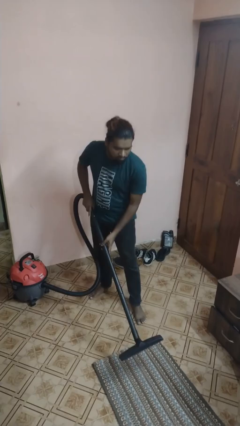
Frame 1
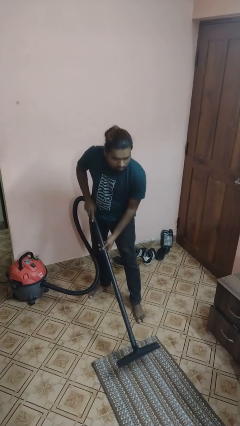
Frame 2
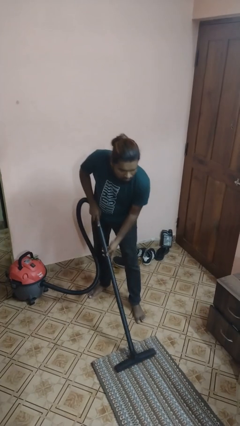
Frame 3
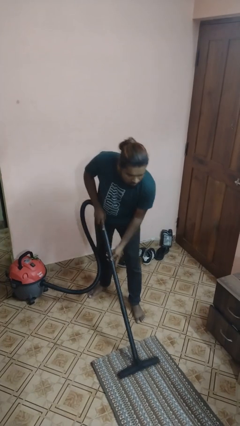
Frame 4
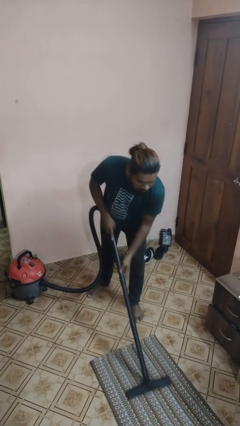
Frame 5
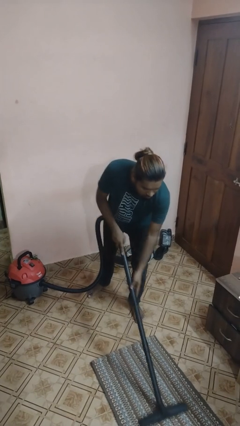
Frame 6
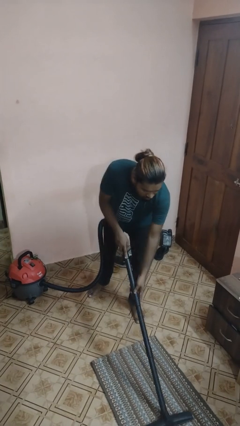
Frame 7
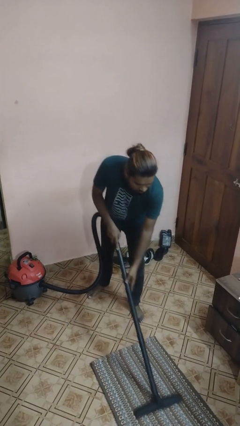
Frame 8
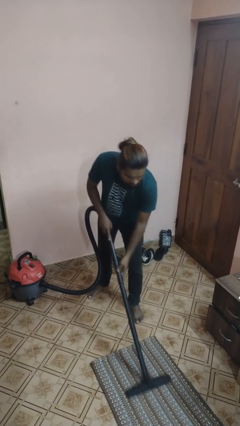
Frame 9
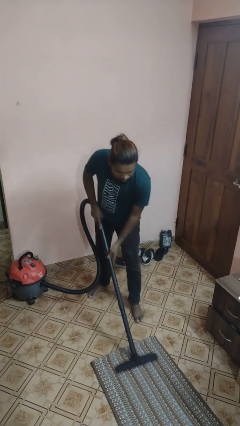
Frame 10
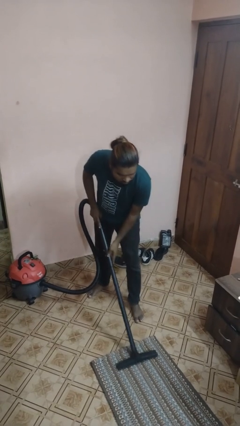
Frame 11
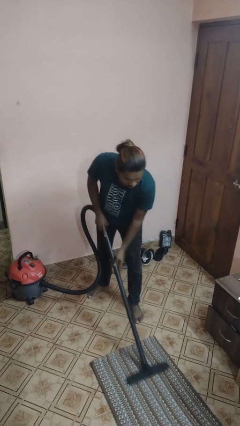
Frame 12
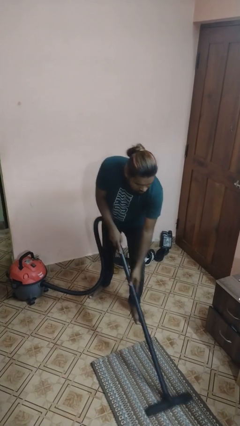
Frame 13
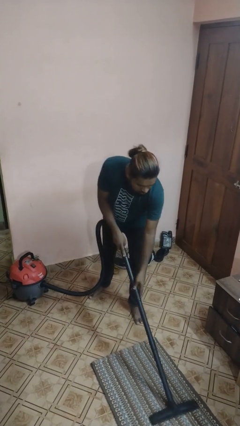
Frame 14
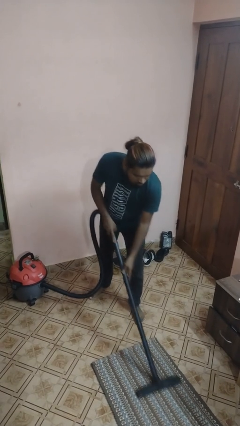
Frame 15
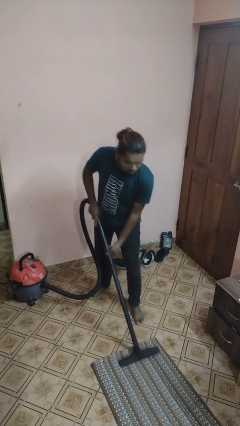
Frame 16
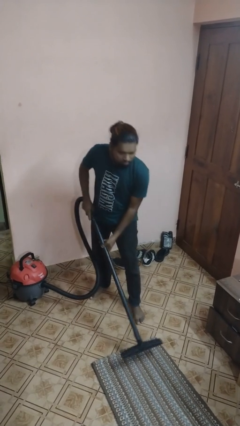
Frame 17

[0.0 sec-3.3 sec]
person vacuums carpet

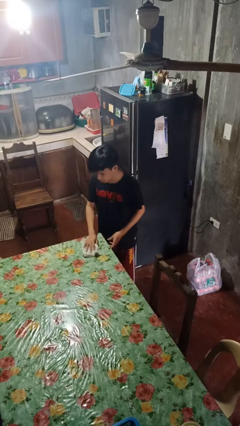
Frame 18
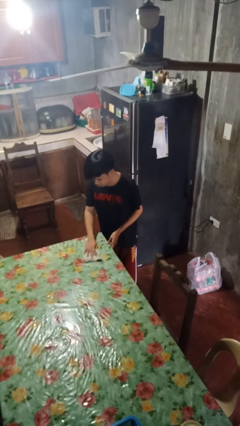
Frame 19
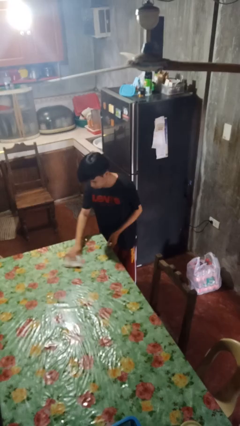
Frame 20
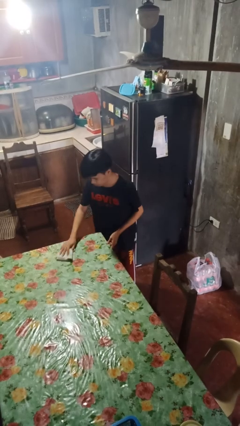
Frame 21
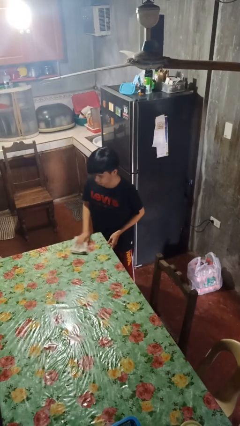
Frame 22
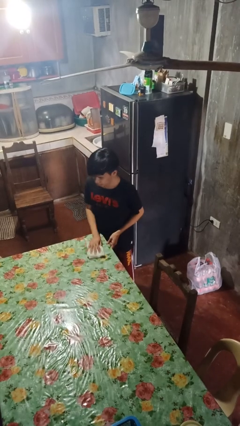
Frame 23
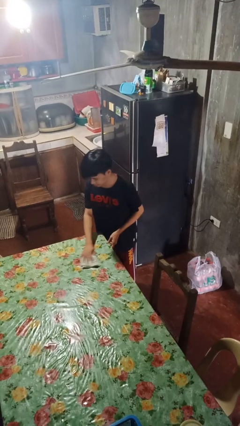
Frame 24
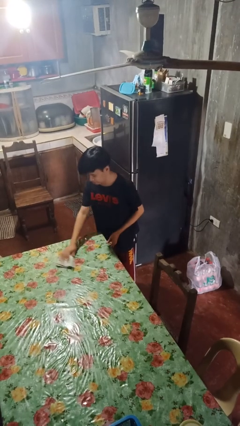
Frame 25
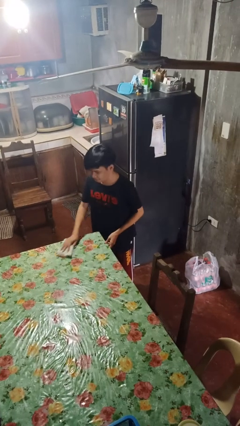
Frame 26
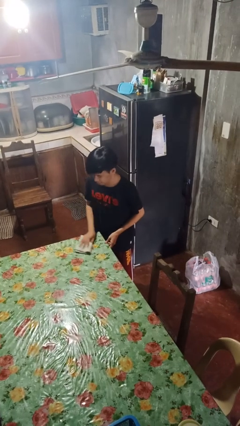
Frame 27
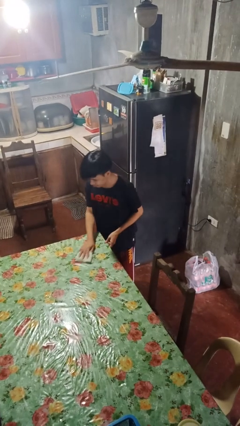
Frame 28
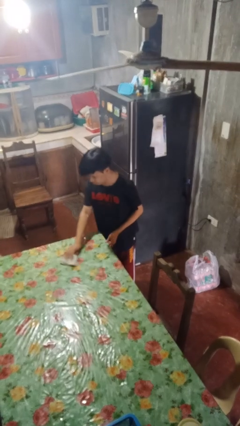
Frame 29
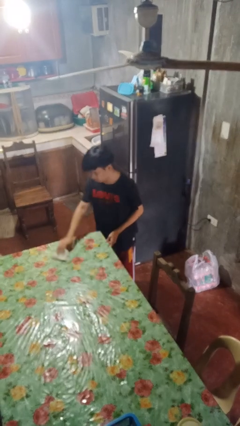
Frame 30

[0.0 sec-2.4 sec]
person cleans table with rag

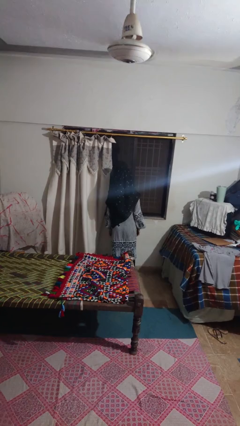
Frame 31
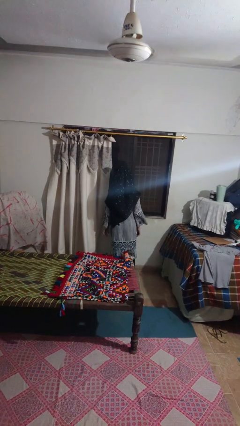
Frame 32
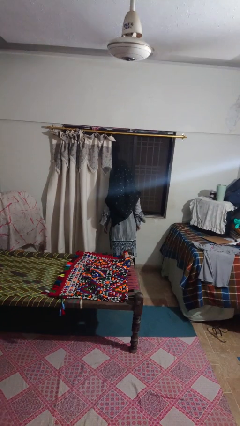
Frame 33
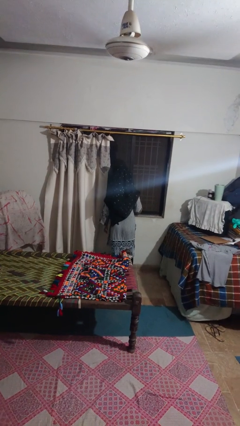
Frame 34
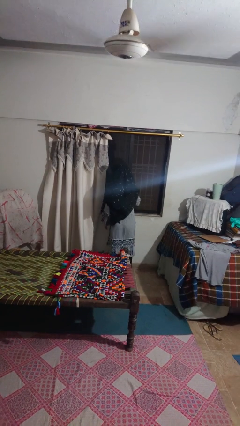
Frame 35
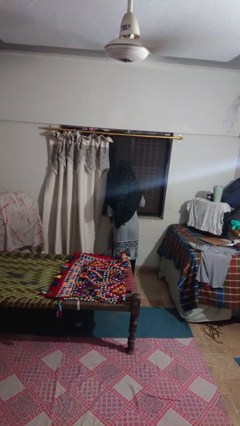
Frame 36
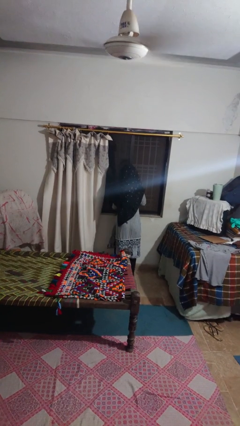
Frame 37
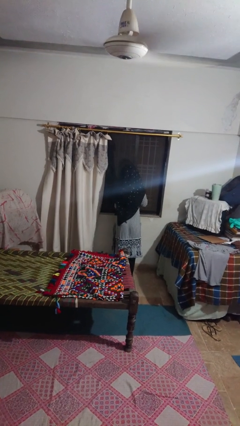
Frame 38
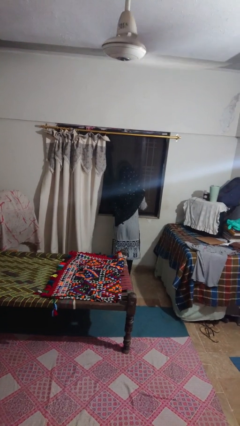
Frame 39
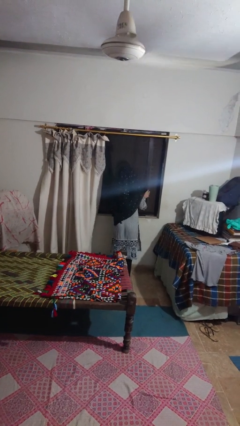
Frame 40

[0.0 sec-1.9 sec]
person closes home window

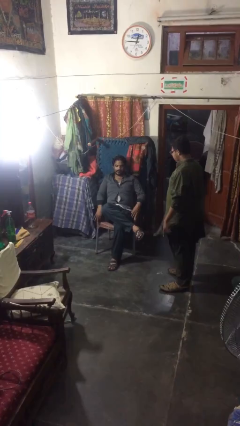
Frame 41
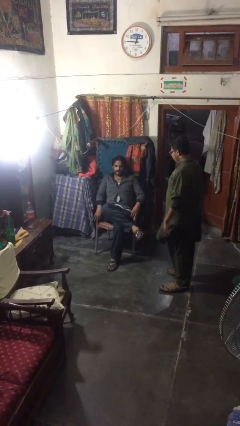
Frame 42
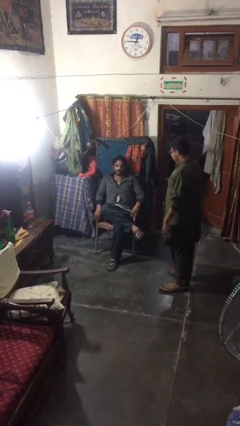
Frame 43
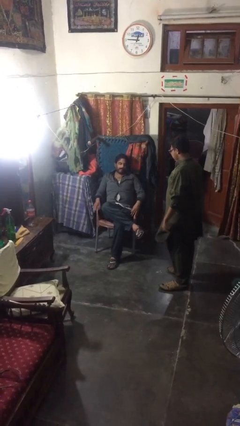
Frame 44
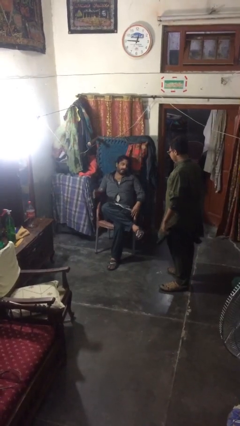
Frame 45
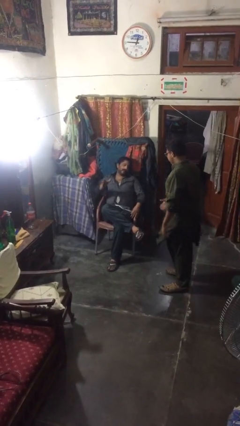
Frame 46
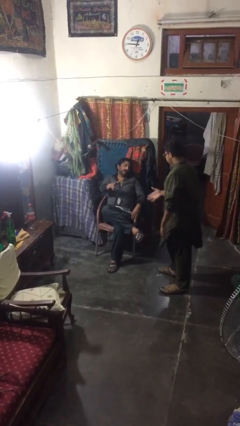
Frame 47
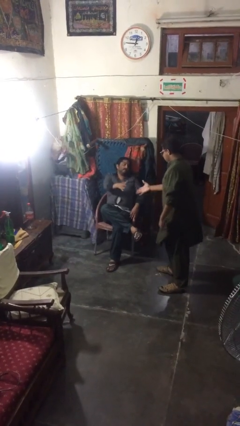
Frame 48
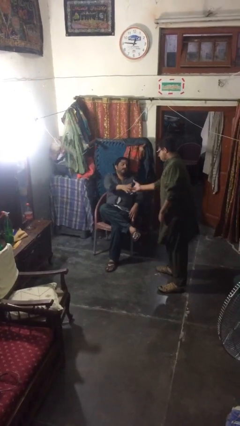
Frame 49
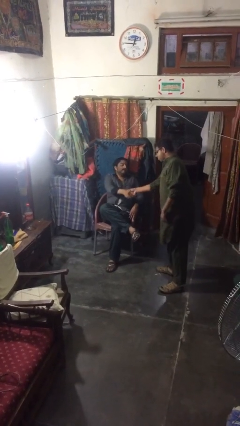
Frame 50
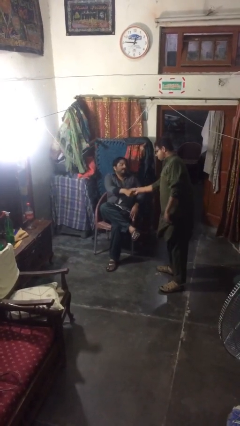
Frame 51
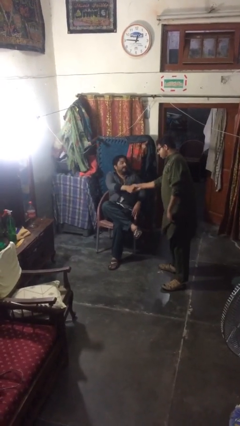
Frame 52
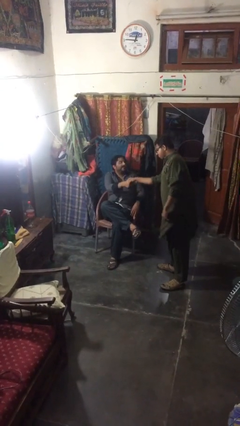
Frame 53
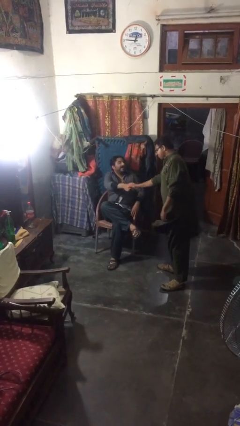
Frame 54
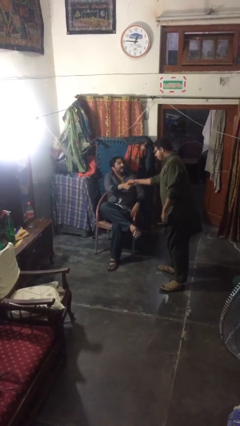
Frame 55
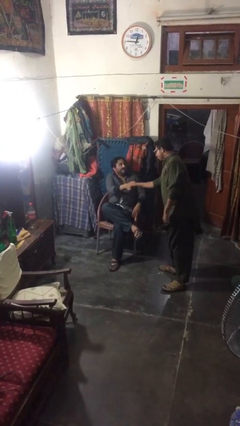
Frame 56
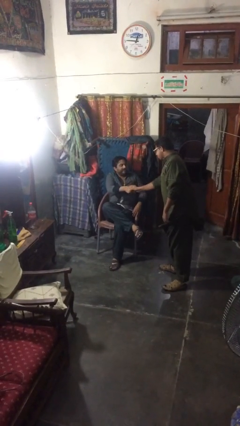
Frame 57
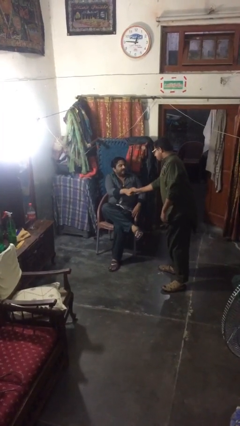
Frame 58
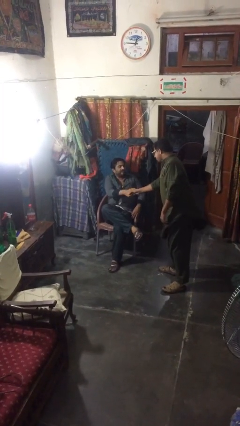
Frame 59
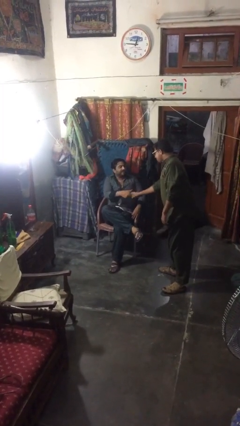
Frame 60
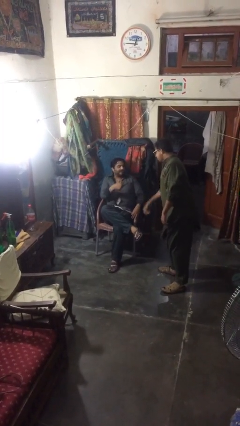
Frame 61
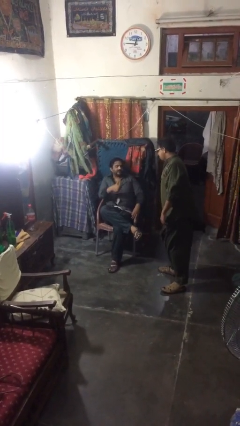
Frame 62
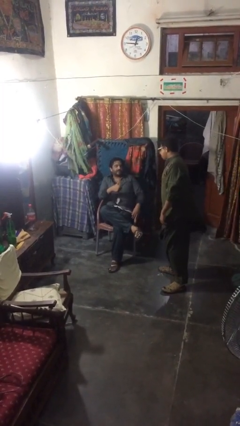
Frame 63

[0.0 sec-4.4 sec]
person shakes hand

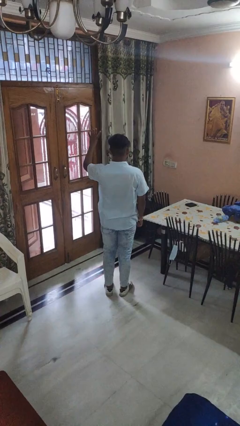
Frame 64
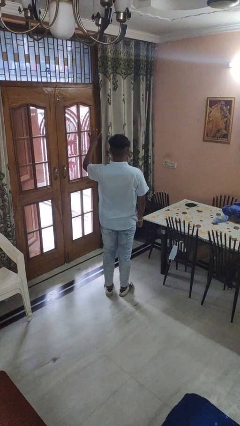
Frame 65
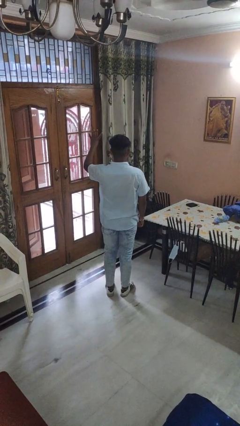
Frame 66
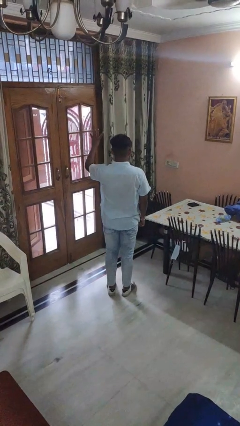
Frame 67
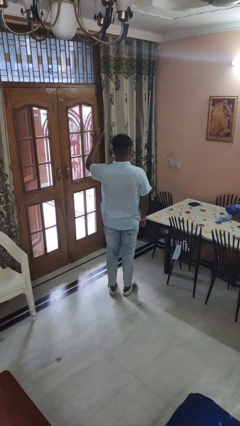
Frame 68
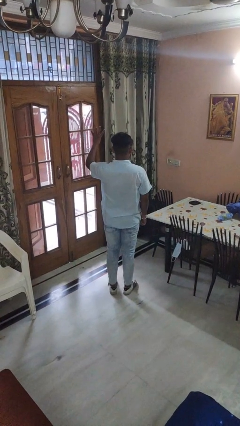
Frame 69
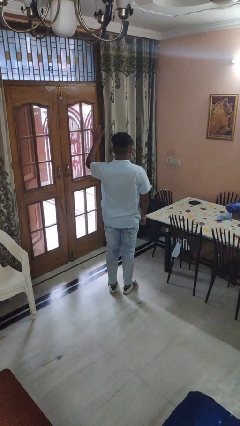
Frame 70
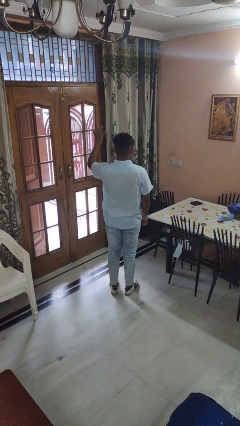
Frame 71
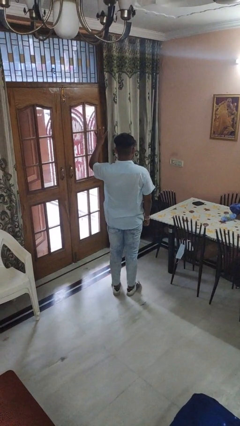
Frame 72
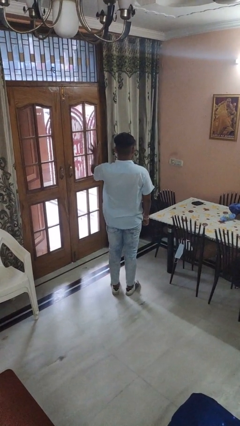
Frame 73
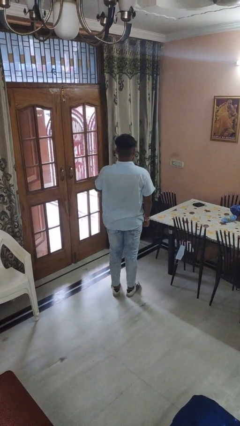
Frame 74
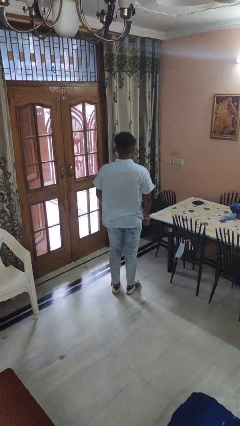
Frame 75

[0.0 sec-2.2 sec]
person gestures number four

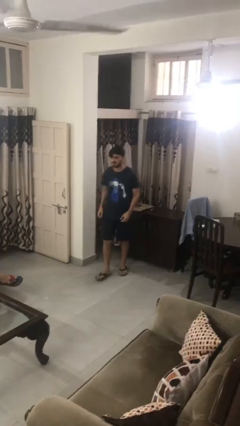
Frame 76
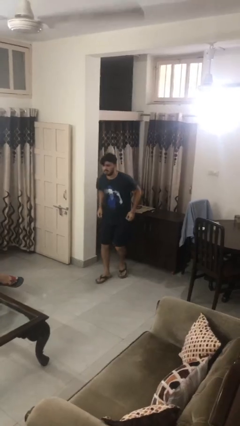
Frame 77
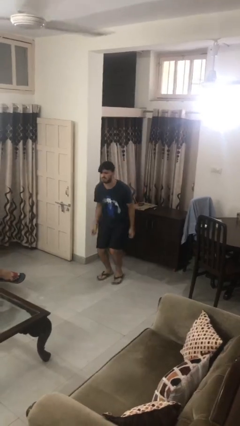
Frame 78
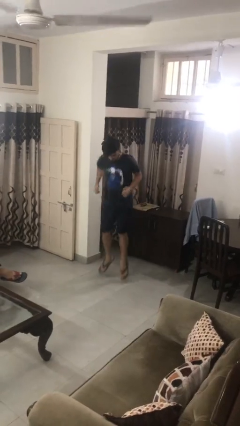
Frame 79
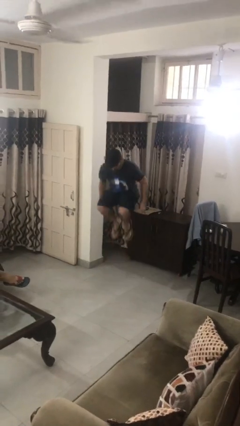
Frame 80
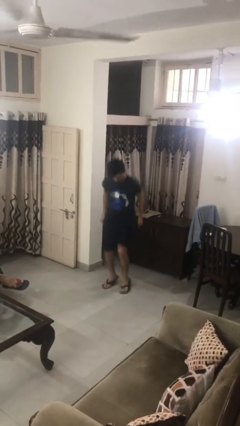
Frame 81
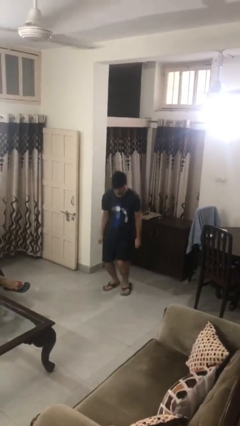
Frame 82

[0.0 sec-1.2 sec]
person jumps

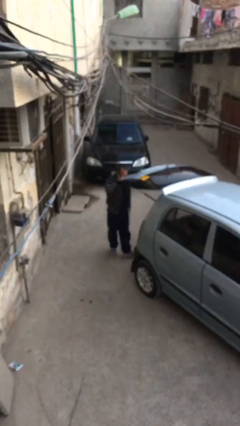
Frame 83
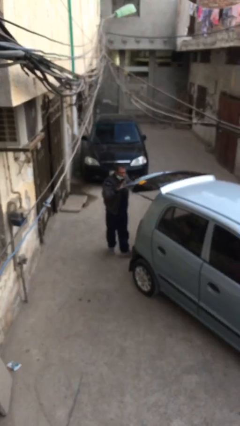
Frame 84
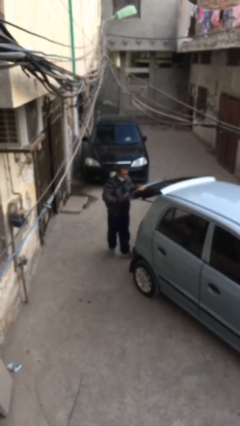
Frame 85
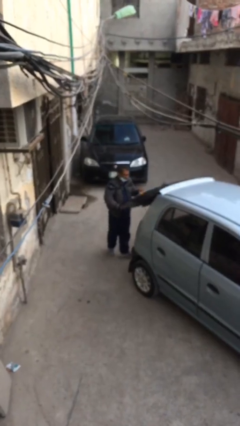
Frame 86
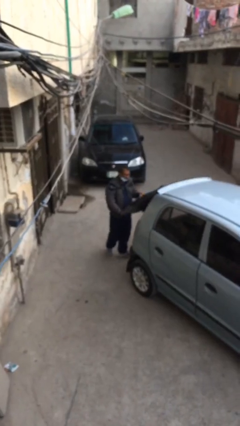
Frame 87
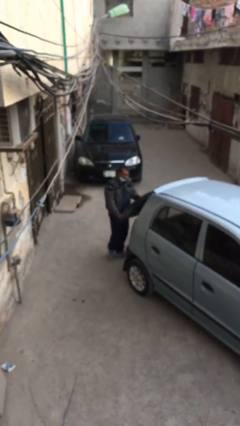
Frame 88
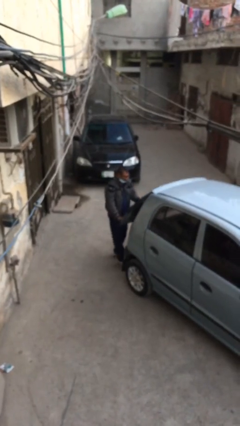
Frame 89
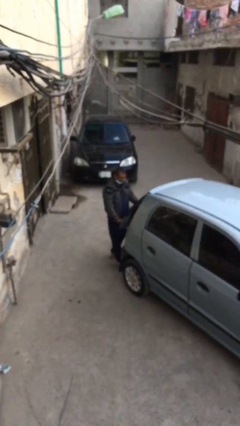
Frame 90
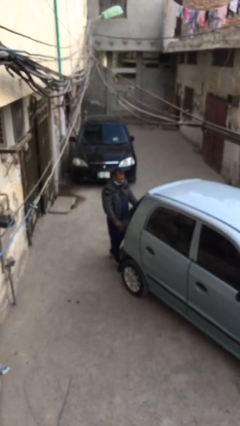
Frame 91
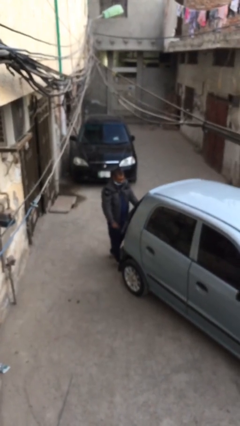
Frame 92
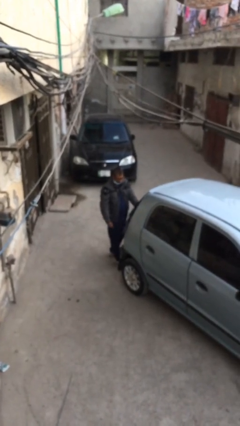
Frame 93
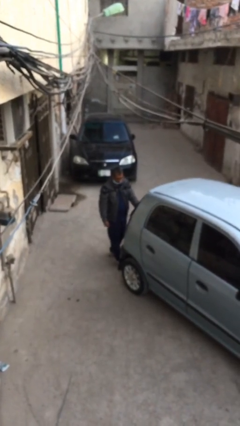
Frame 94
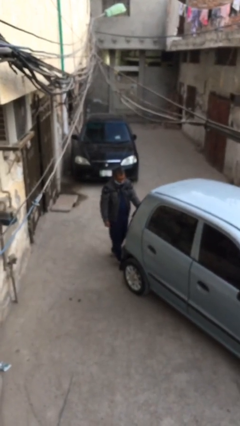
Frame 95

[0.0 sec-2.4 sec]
person closes car trunk
